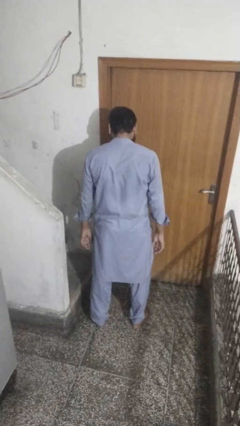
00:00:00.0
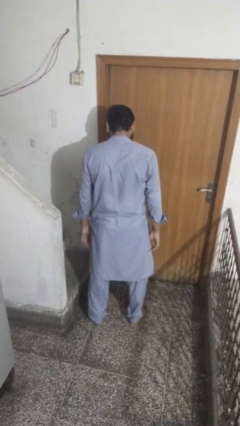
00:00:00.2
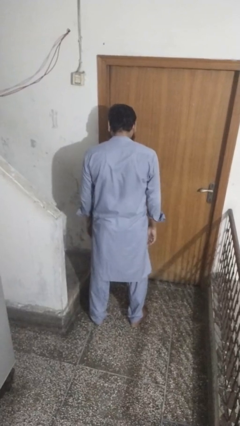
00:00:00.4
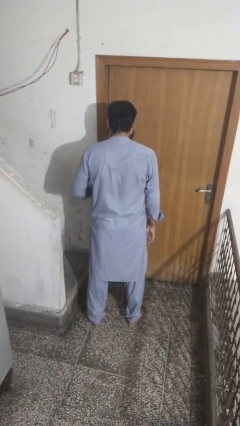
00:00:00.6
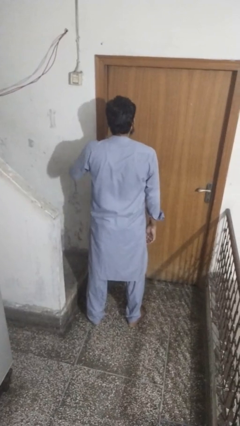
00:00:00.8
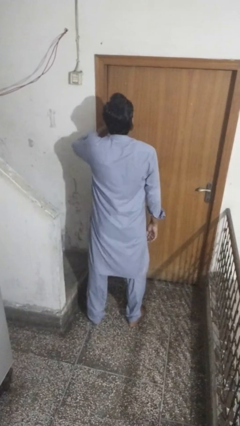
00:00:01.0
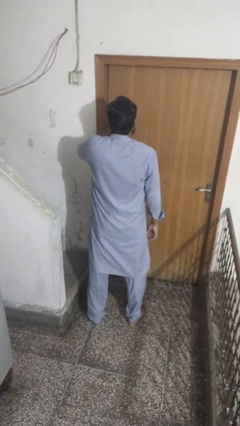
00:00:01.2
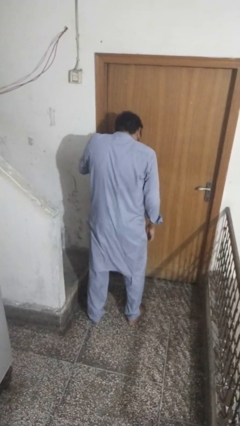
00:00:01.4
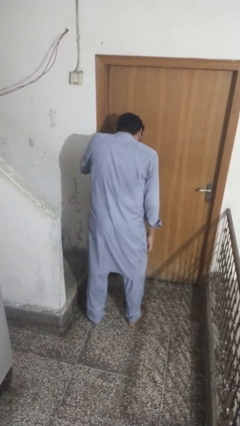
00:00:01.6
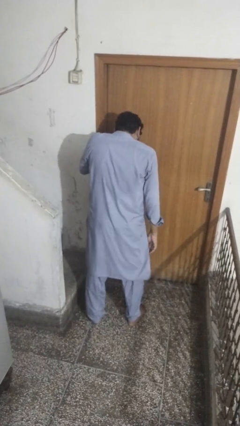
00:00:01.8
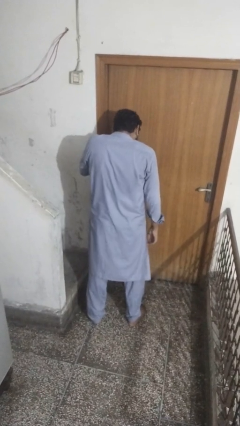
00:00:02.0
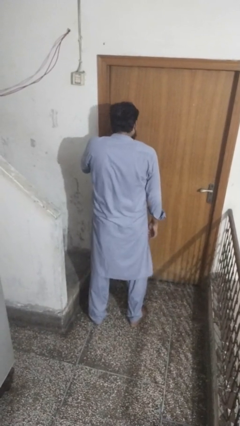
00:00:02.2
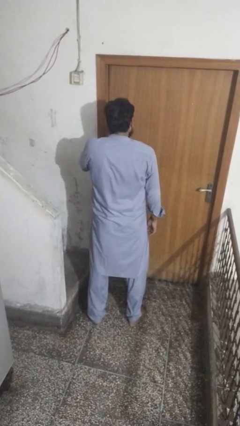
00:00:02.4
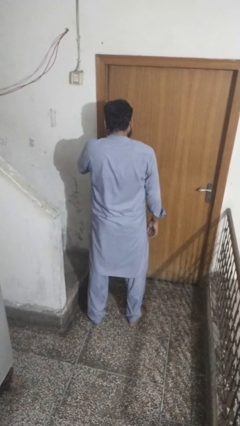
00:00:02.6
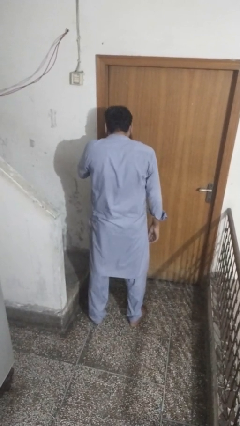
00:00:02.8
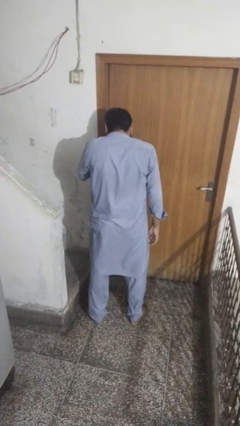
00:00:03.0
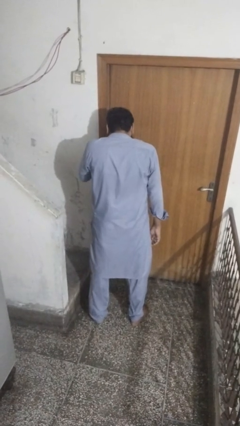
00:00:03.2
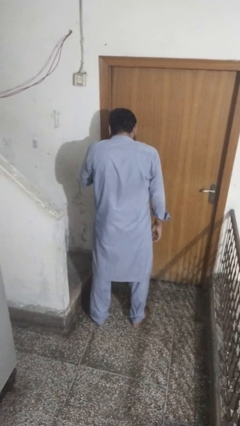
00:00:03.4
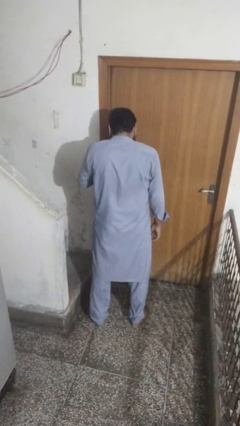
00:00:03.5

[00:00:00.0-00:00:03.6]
person sneezes into hand

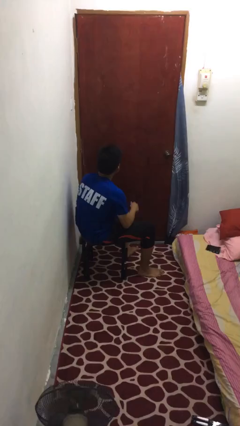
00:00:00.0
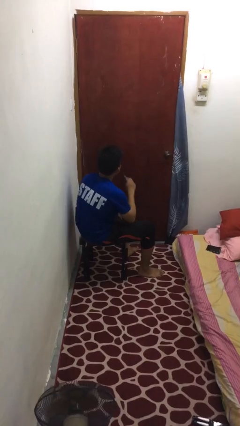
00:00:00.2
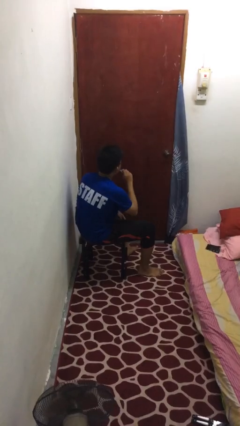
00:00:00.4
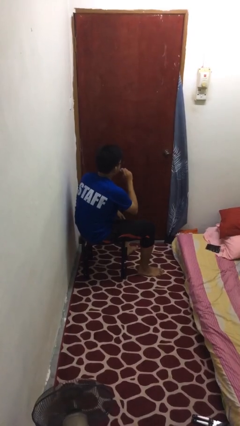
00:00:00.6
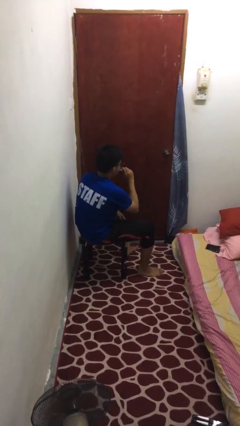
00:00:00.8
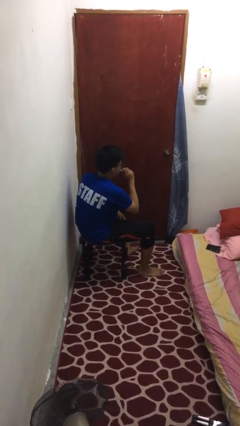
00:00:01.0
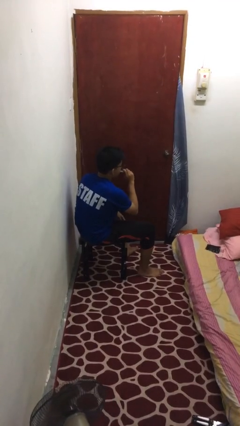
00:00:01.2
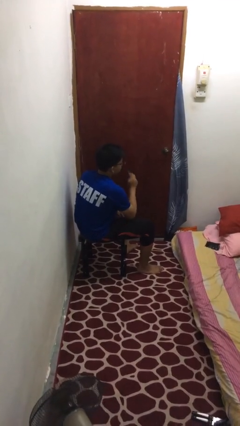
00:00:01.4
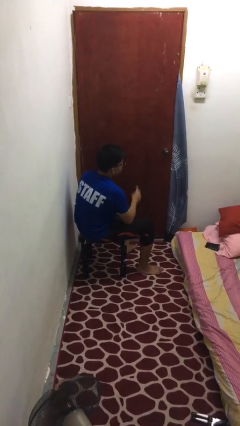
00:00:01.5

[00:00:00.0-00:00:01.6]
person vapes

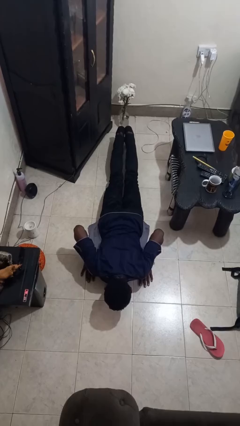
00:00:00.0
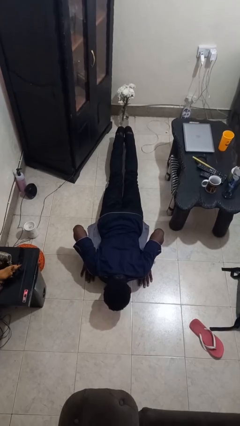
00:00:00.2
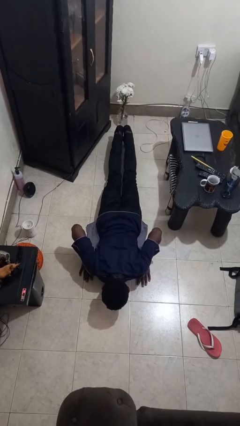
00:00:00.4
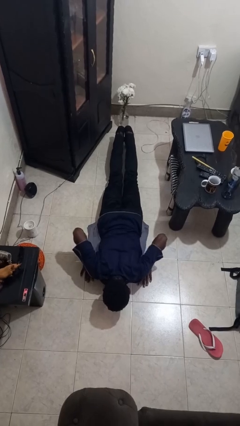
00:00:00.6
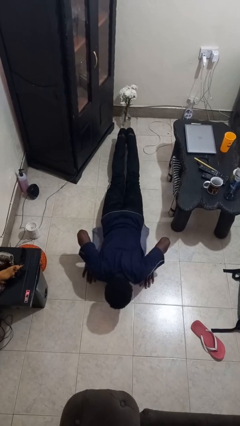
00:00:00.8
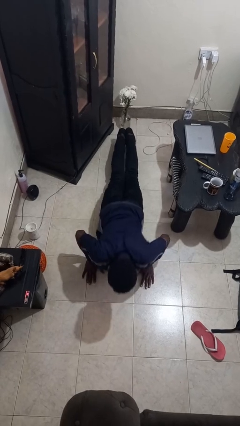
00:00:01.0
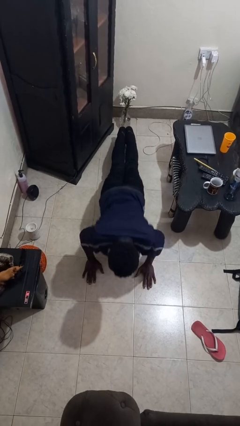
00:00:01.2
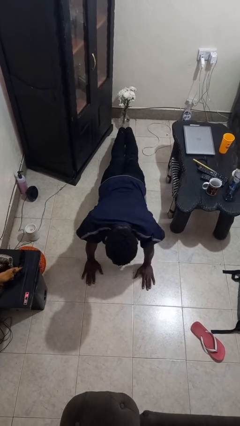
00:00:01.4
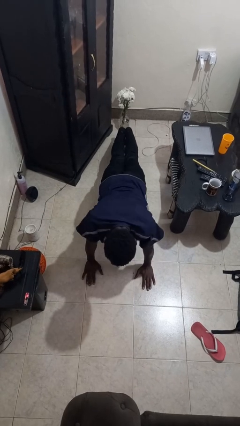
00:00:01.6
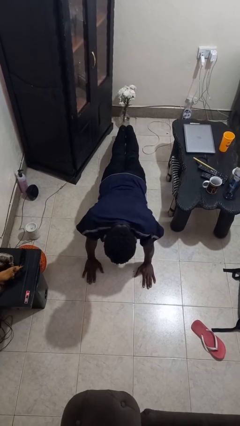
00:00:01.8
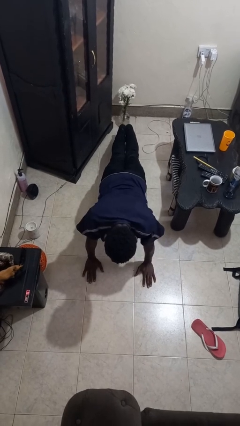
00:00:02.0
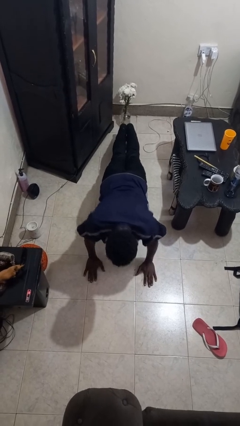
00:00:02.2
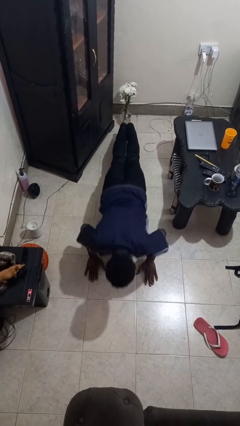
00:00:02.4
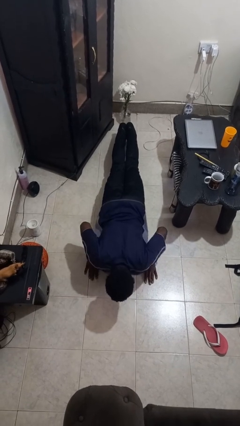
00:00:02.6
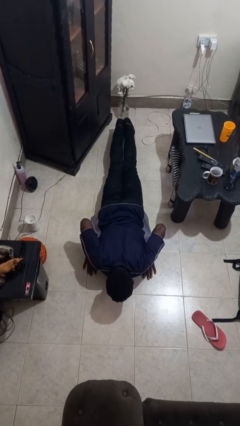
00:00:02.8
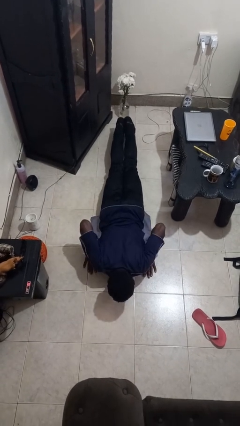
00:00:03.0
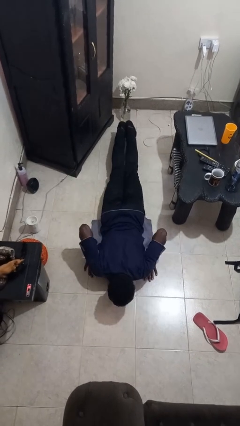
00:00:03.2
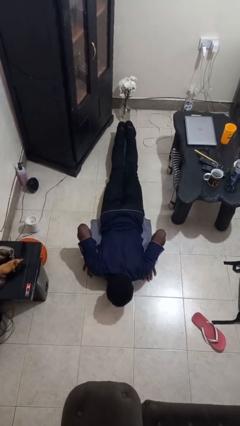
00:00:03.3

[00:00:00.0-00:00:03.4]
person exercises with pushup

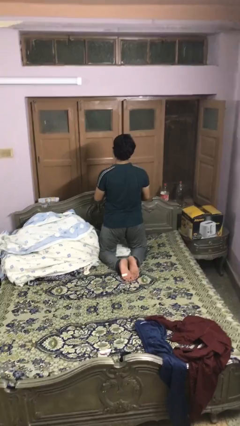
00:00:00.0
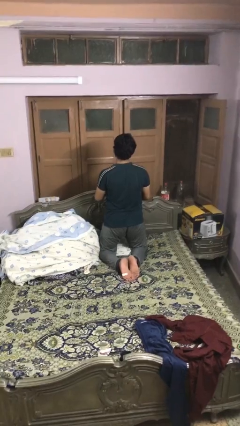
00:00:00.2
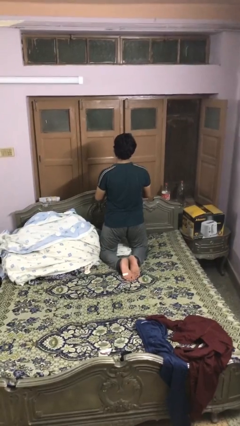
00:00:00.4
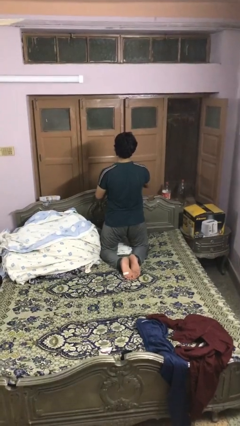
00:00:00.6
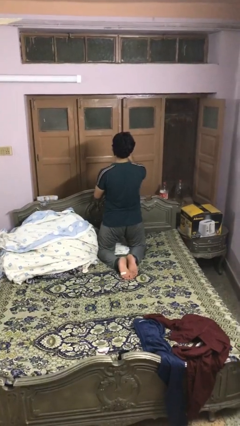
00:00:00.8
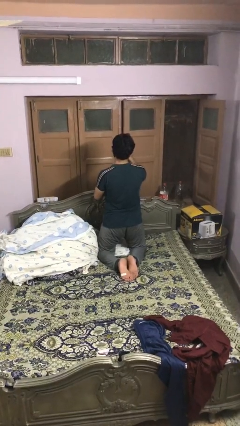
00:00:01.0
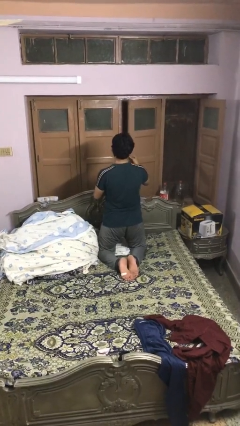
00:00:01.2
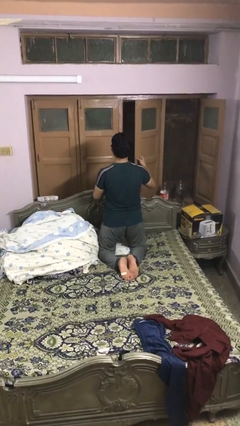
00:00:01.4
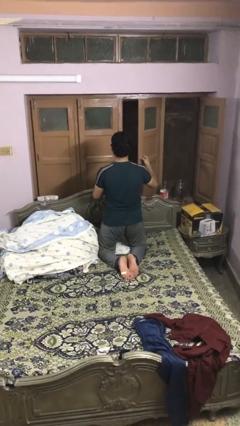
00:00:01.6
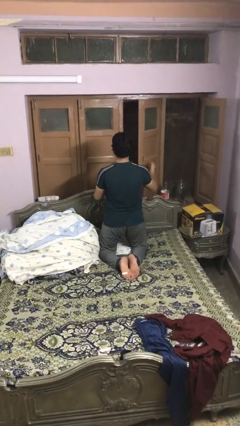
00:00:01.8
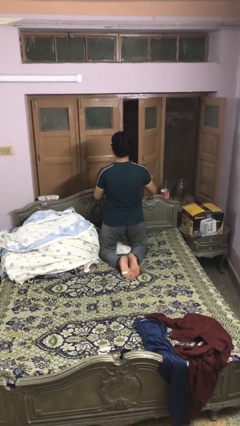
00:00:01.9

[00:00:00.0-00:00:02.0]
person opens home window

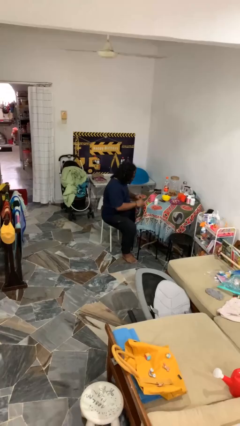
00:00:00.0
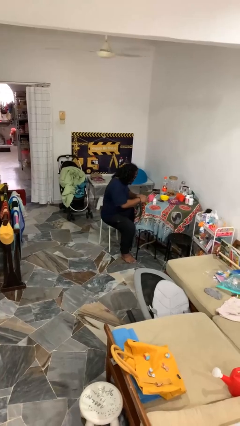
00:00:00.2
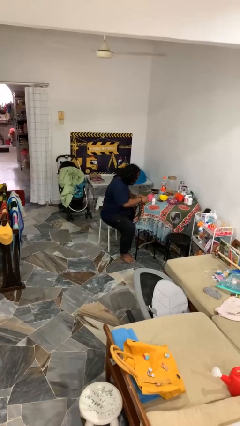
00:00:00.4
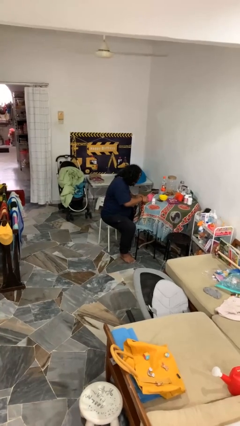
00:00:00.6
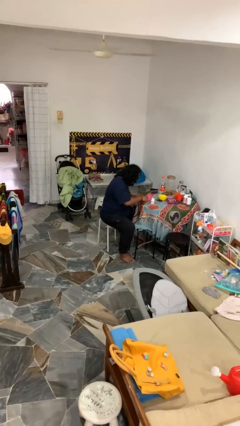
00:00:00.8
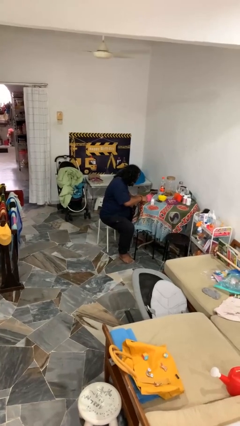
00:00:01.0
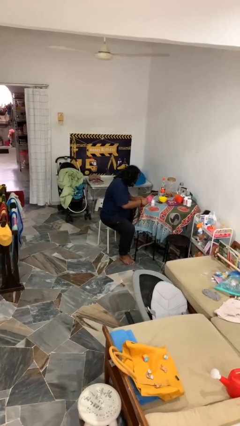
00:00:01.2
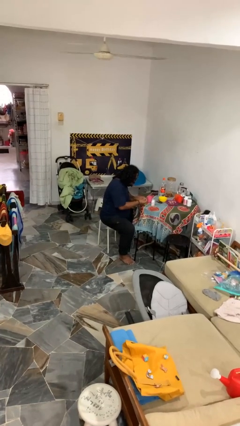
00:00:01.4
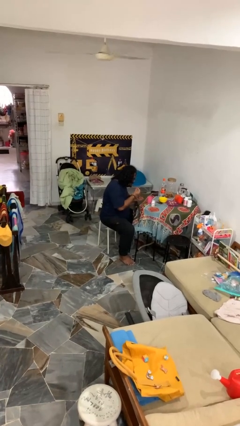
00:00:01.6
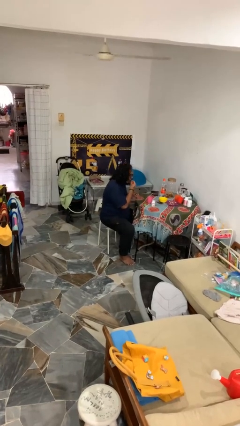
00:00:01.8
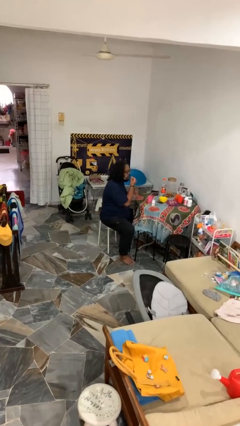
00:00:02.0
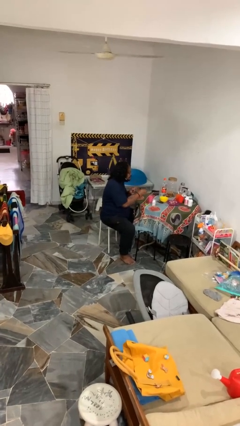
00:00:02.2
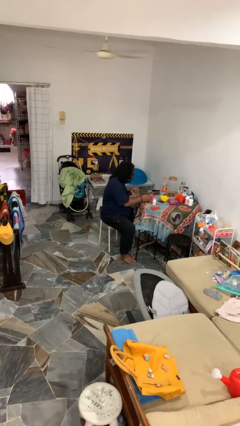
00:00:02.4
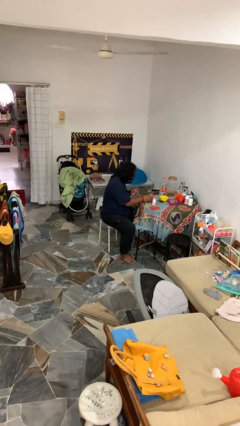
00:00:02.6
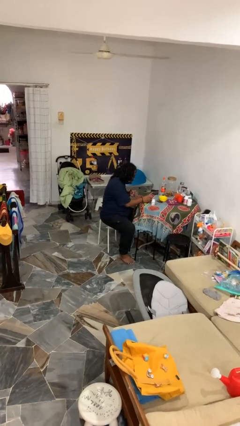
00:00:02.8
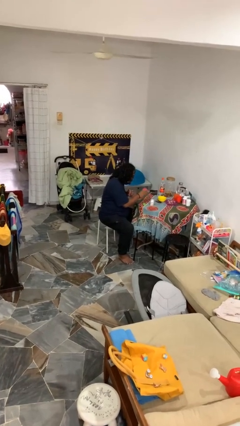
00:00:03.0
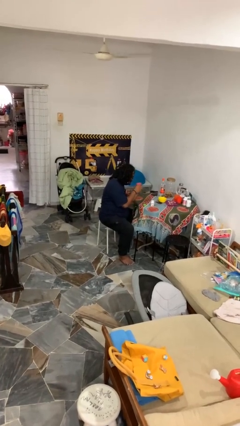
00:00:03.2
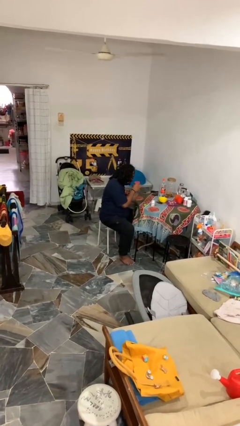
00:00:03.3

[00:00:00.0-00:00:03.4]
person takes medicine pills

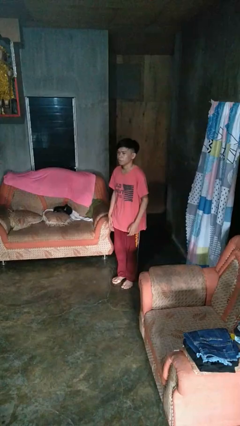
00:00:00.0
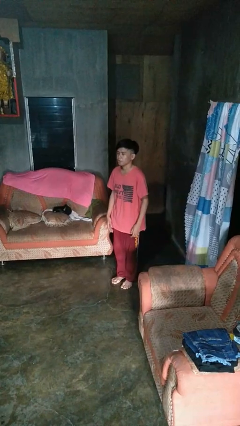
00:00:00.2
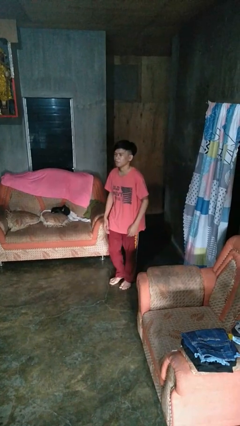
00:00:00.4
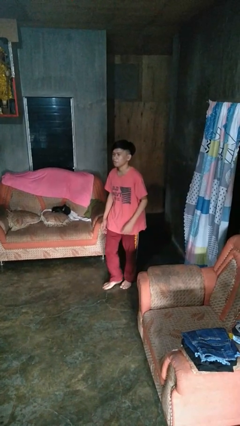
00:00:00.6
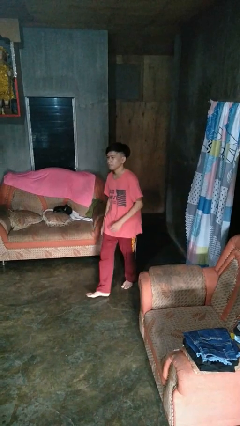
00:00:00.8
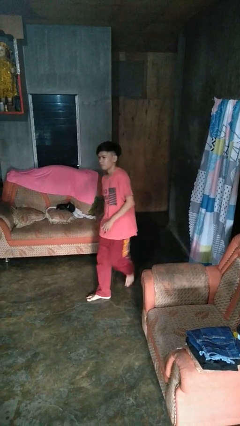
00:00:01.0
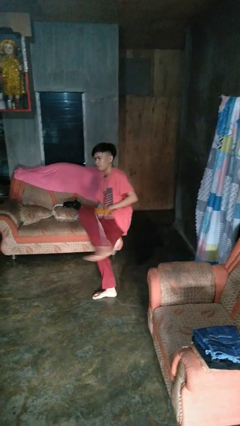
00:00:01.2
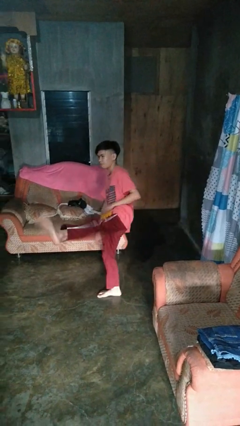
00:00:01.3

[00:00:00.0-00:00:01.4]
person karate kicks

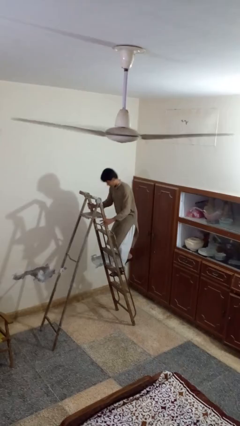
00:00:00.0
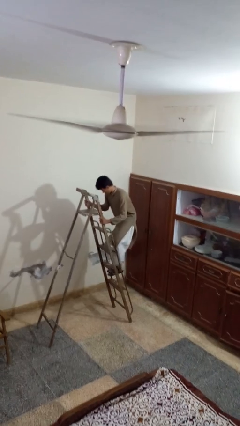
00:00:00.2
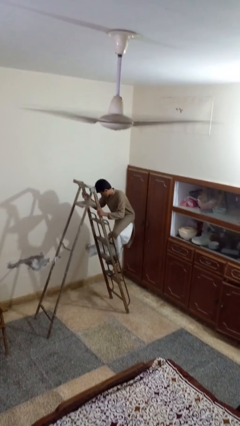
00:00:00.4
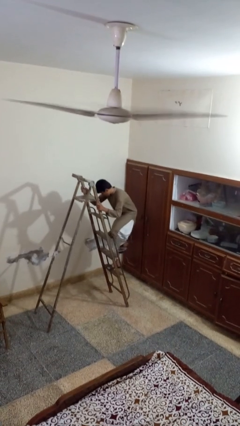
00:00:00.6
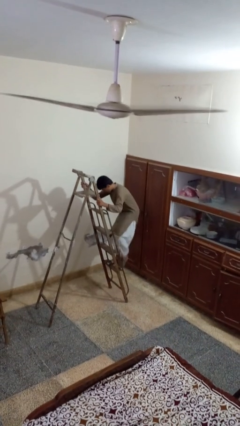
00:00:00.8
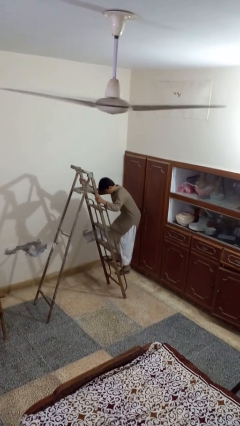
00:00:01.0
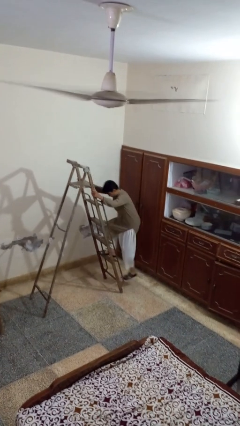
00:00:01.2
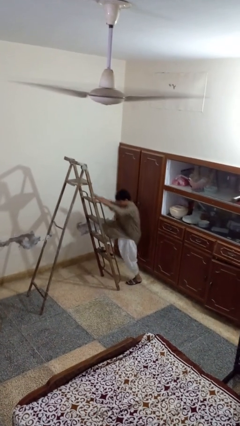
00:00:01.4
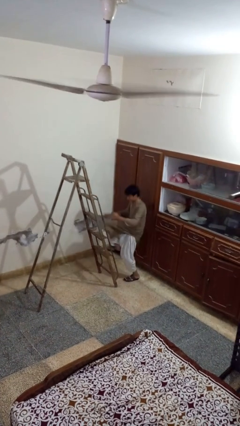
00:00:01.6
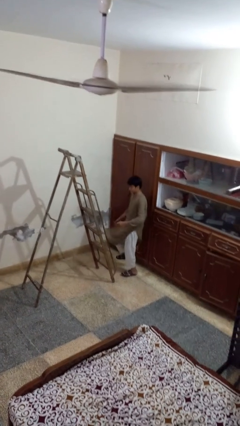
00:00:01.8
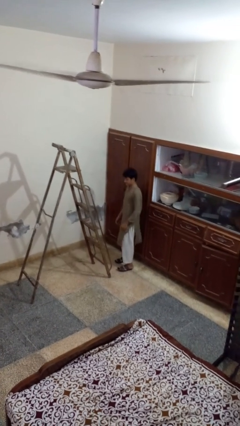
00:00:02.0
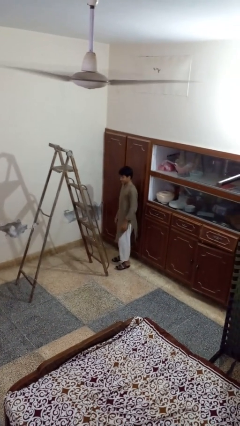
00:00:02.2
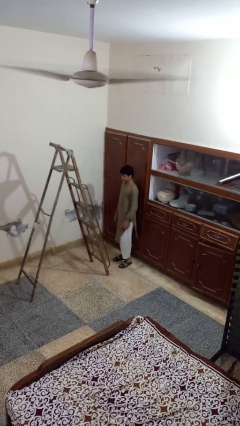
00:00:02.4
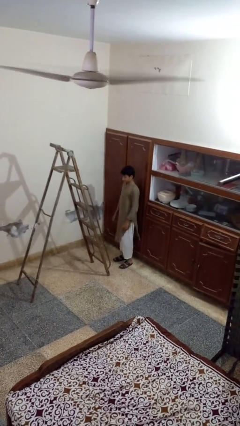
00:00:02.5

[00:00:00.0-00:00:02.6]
person climbs down ladder
